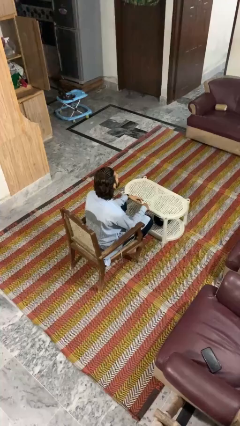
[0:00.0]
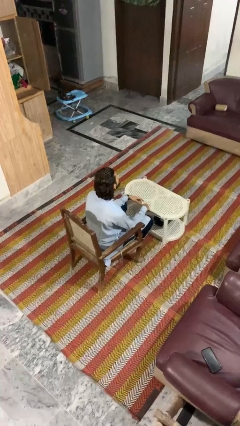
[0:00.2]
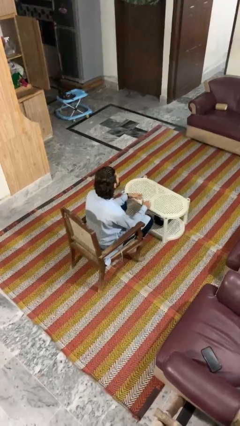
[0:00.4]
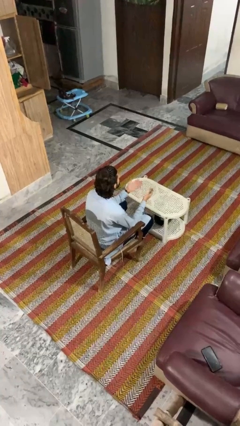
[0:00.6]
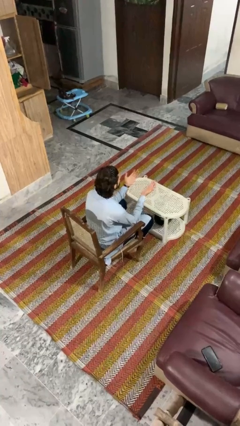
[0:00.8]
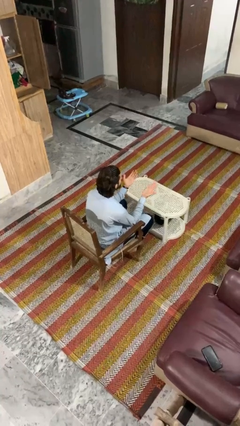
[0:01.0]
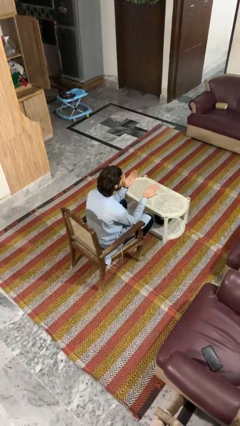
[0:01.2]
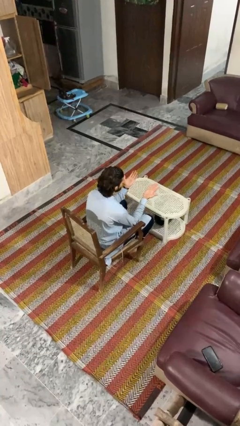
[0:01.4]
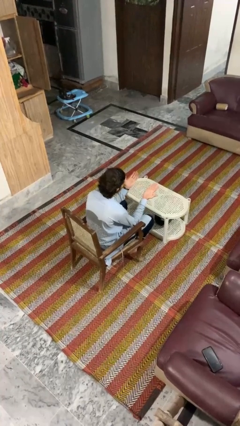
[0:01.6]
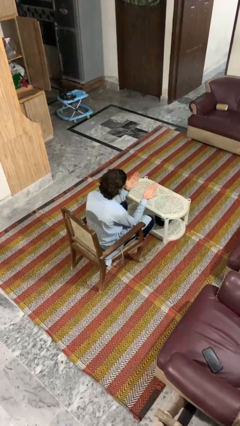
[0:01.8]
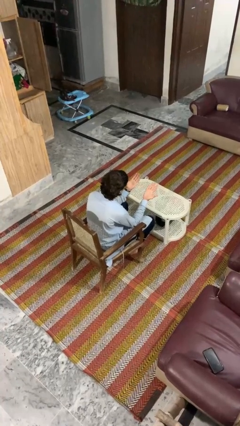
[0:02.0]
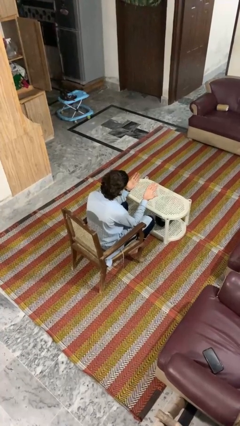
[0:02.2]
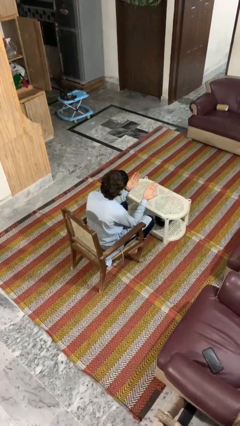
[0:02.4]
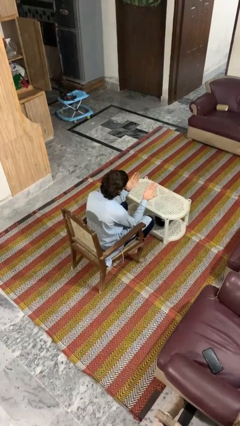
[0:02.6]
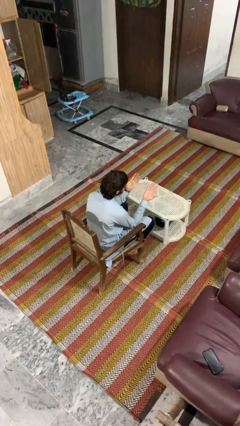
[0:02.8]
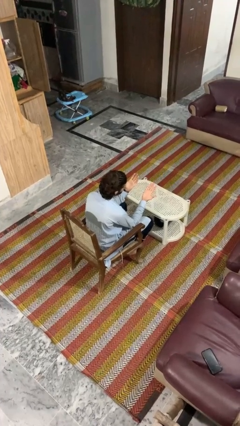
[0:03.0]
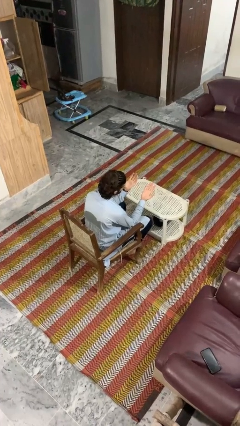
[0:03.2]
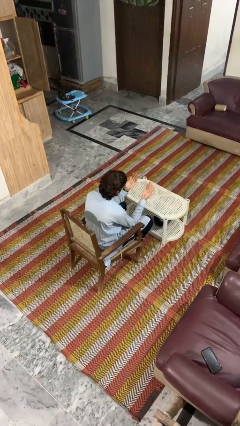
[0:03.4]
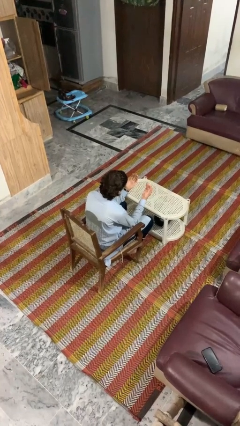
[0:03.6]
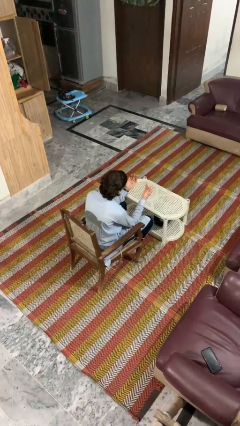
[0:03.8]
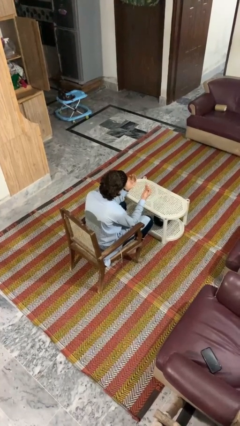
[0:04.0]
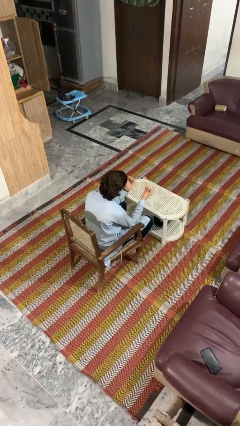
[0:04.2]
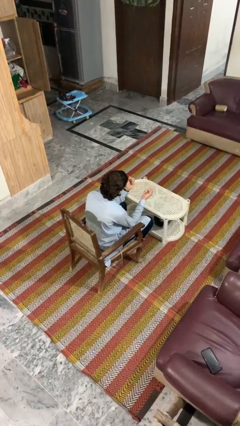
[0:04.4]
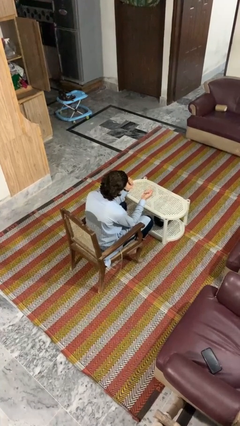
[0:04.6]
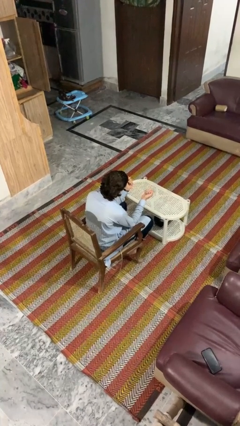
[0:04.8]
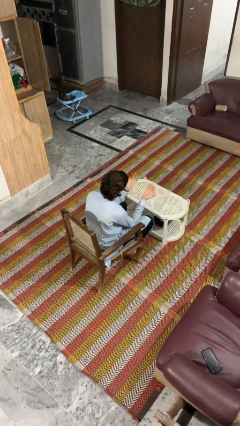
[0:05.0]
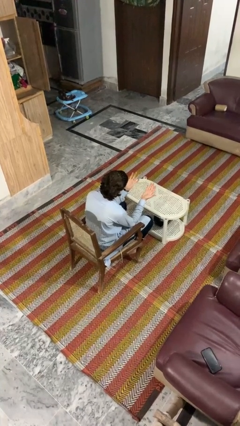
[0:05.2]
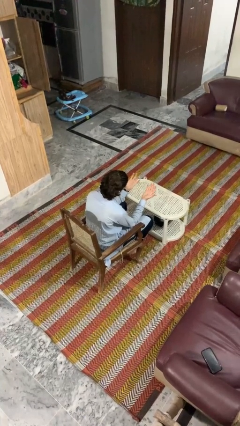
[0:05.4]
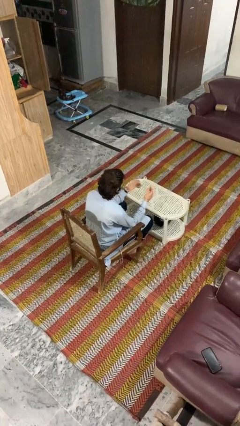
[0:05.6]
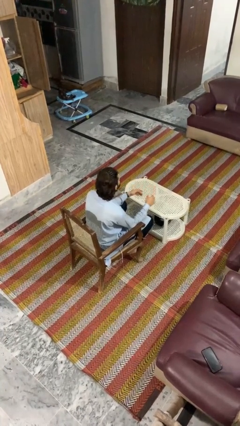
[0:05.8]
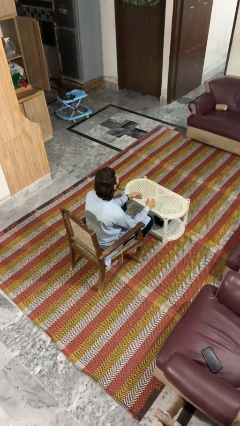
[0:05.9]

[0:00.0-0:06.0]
person looks at hands in lap

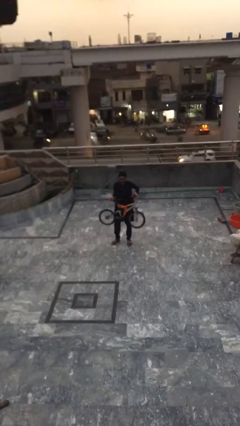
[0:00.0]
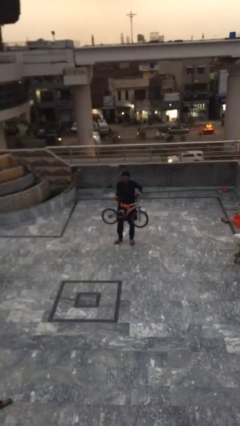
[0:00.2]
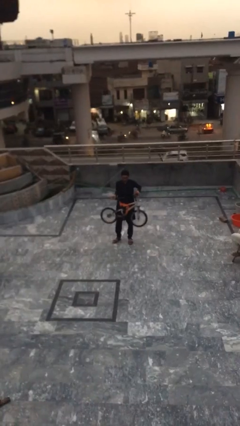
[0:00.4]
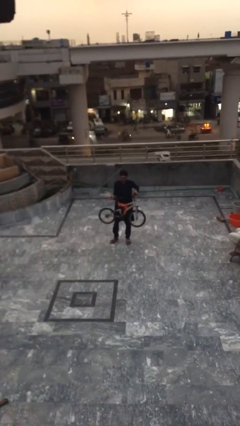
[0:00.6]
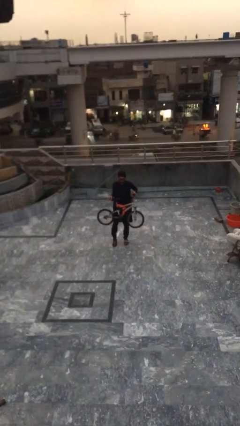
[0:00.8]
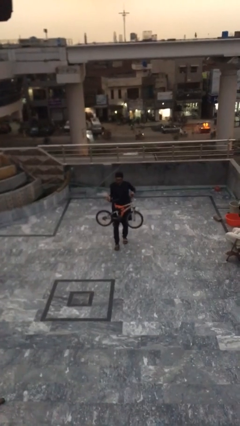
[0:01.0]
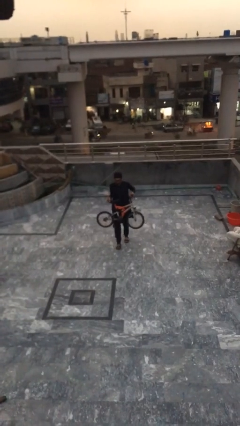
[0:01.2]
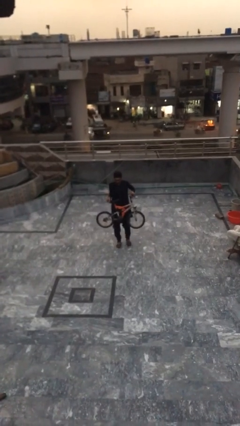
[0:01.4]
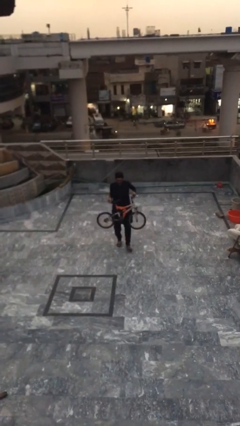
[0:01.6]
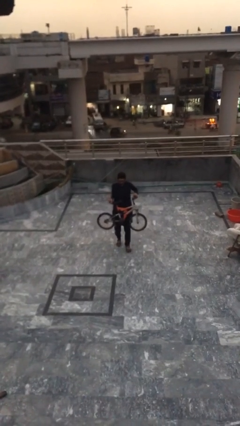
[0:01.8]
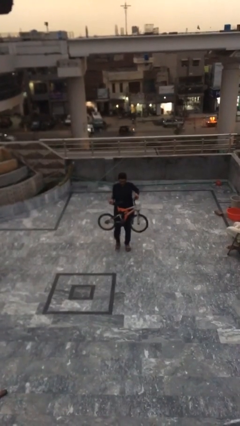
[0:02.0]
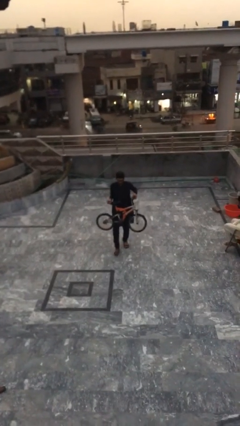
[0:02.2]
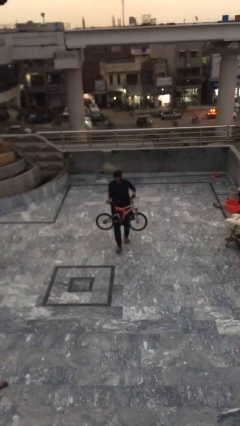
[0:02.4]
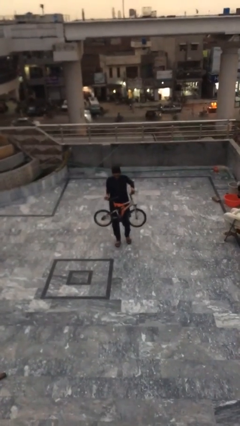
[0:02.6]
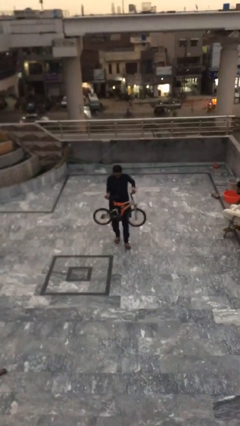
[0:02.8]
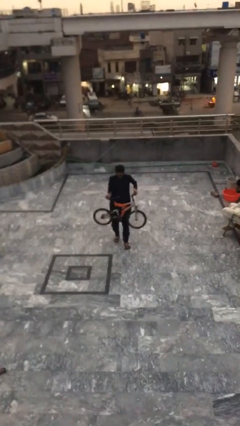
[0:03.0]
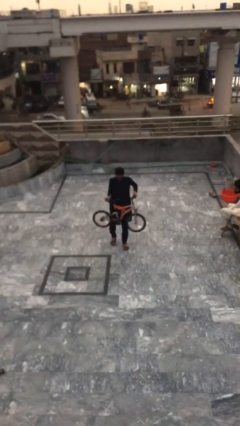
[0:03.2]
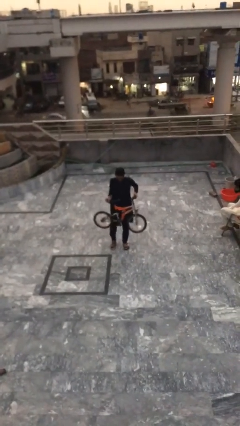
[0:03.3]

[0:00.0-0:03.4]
person carries heavy object

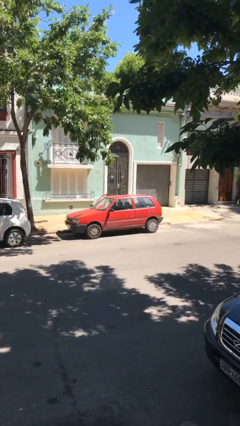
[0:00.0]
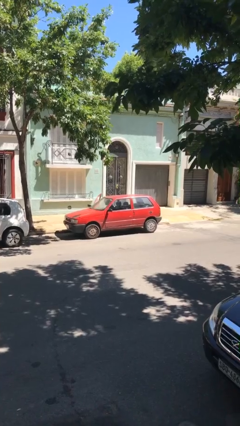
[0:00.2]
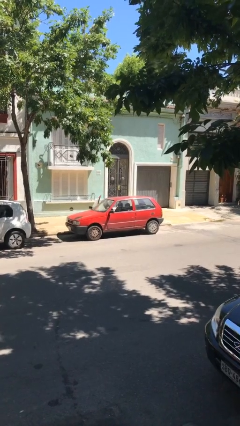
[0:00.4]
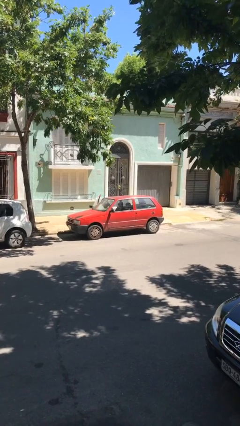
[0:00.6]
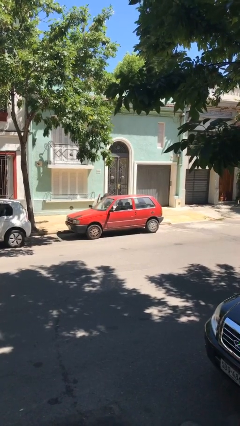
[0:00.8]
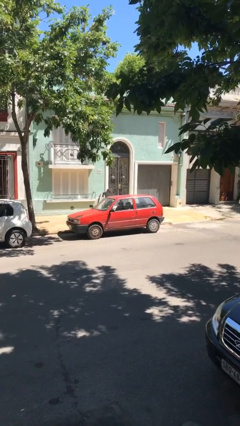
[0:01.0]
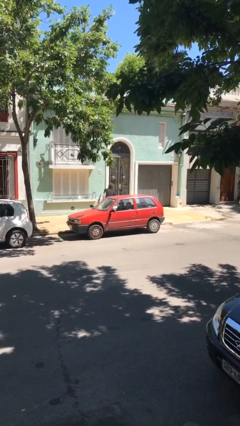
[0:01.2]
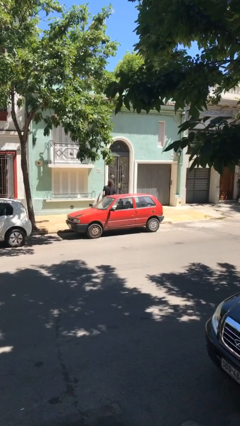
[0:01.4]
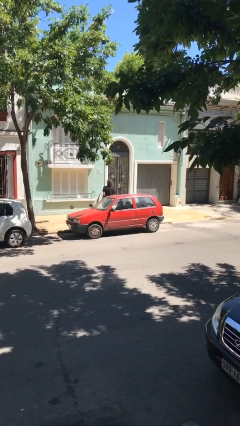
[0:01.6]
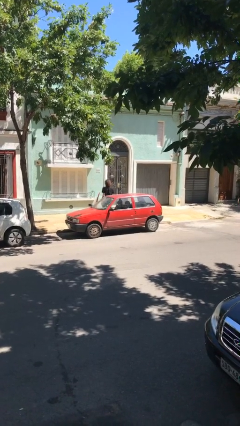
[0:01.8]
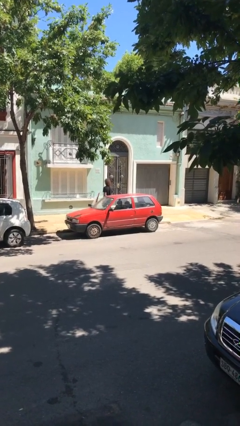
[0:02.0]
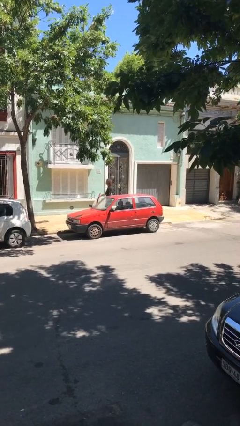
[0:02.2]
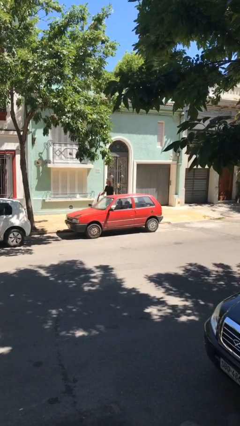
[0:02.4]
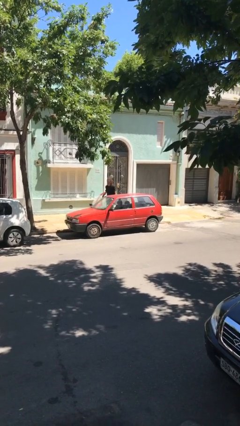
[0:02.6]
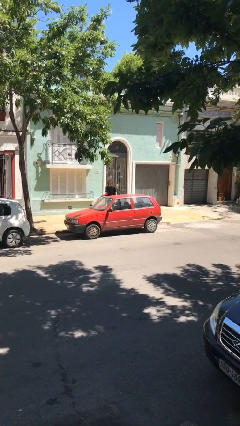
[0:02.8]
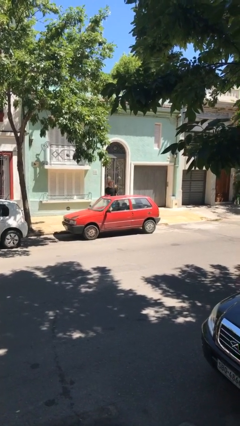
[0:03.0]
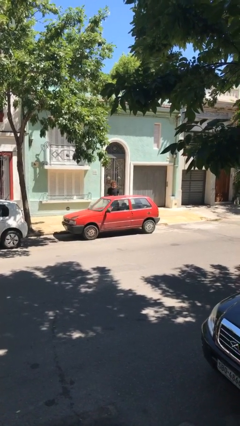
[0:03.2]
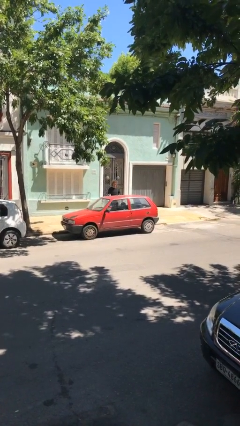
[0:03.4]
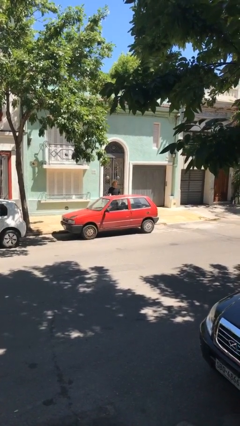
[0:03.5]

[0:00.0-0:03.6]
car drops off person

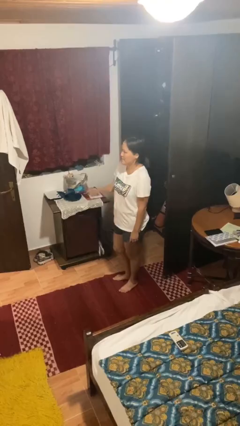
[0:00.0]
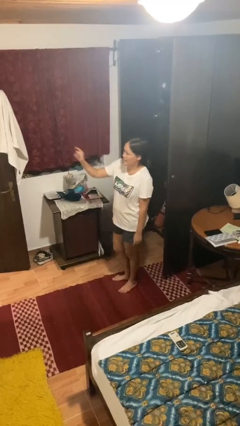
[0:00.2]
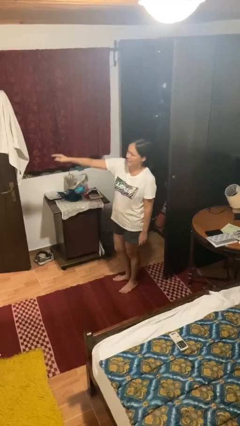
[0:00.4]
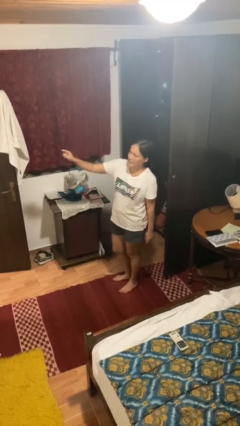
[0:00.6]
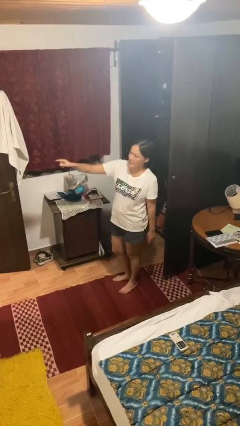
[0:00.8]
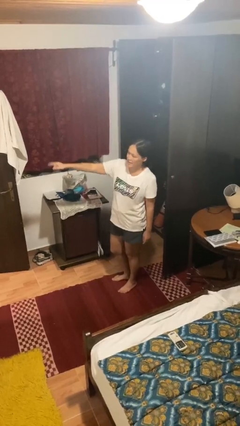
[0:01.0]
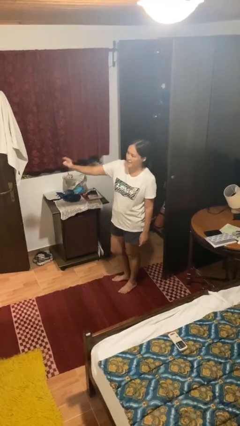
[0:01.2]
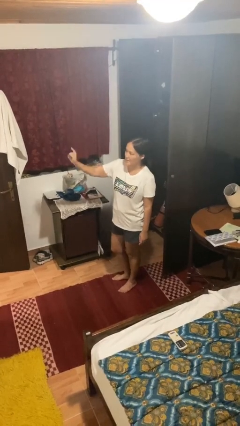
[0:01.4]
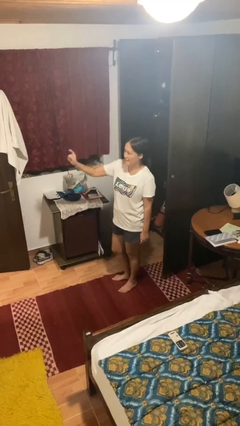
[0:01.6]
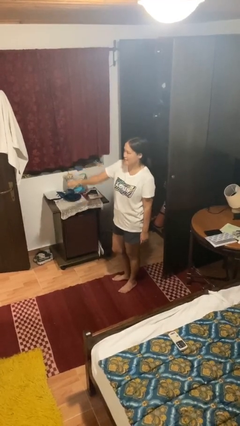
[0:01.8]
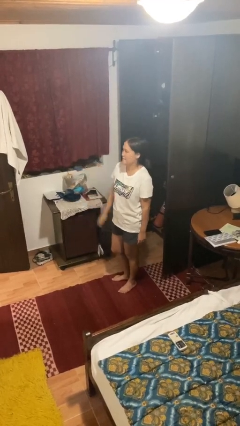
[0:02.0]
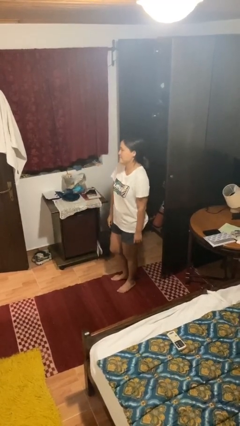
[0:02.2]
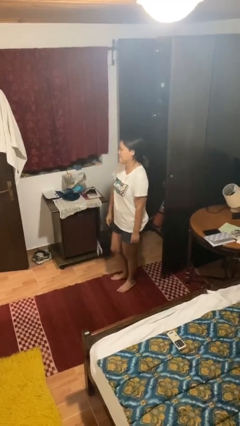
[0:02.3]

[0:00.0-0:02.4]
person points at person

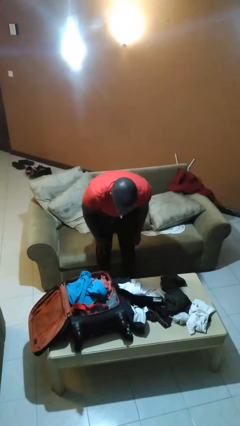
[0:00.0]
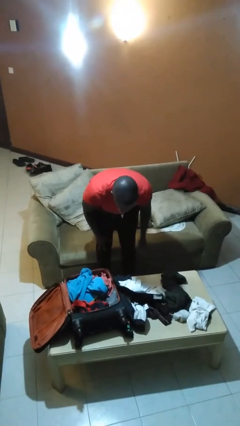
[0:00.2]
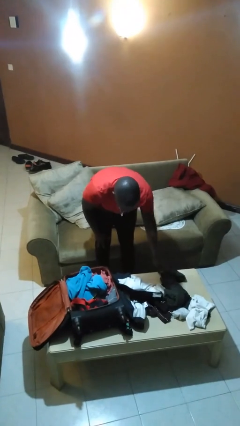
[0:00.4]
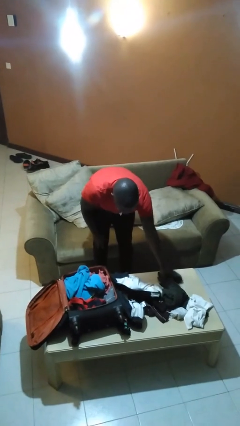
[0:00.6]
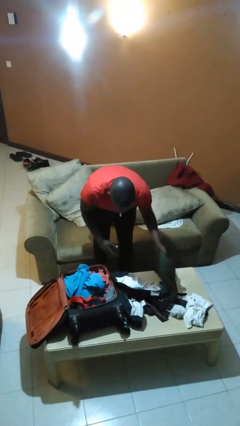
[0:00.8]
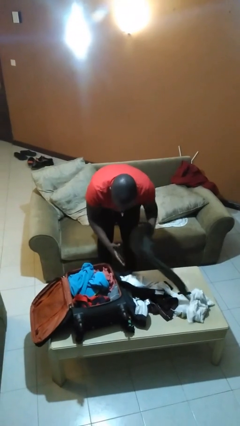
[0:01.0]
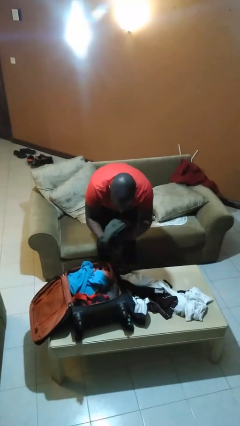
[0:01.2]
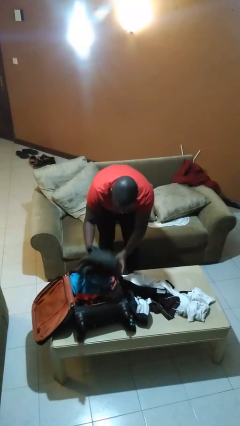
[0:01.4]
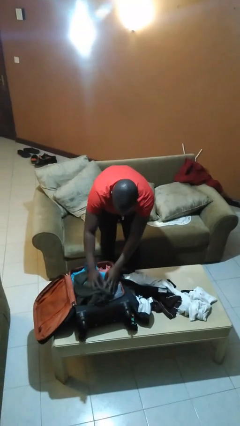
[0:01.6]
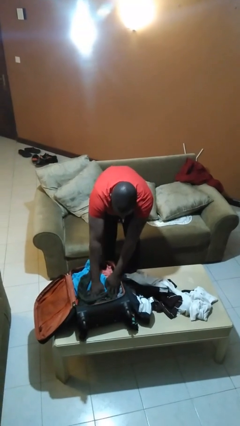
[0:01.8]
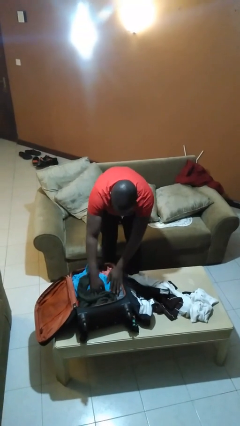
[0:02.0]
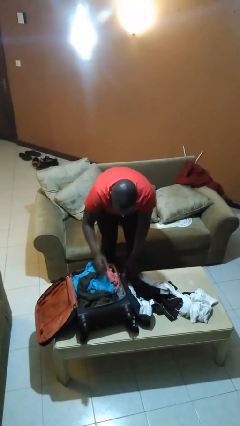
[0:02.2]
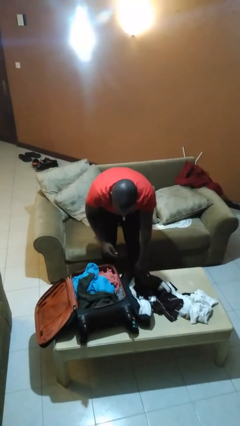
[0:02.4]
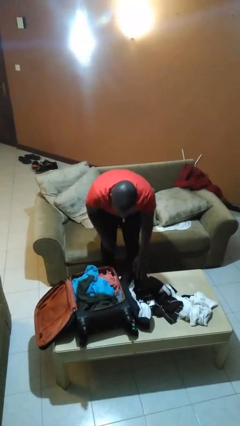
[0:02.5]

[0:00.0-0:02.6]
person loads clothes into suitcase
